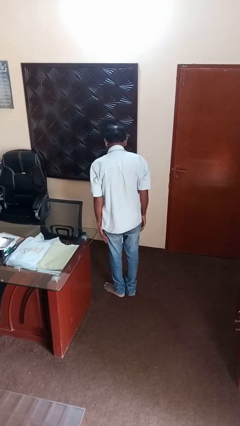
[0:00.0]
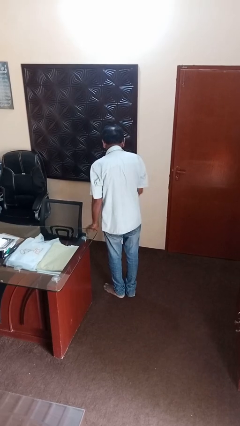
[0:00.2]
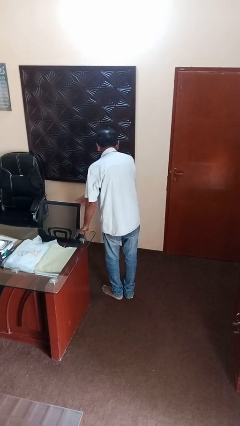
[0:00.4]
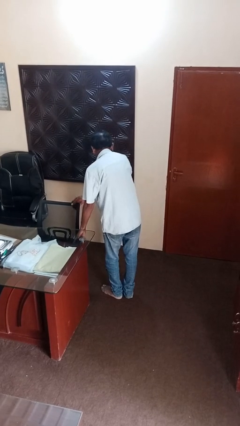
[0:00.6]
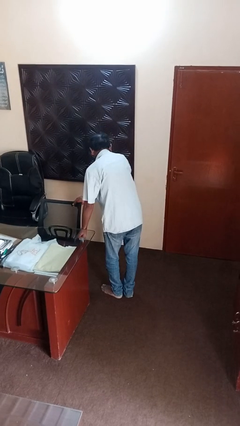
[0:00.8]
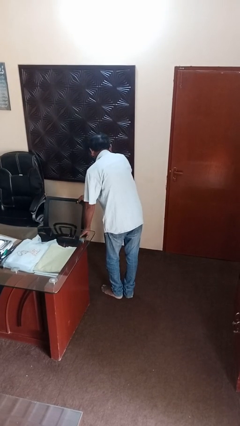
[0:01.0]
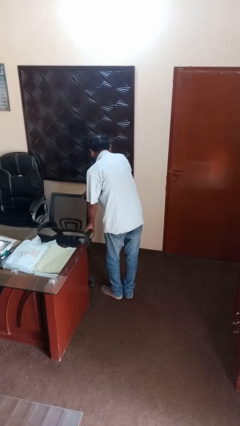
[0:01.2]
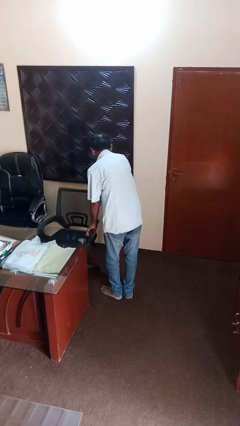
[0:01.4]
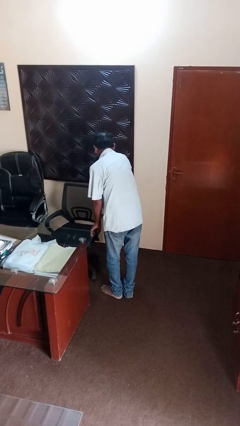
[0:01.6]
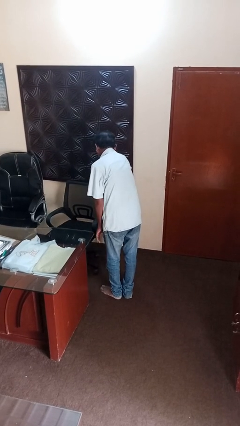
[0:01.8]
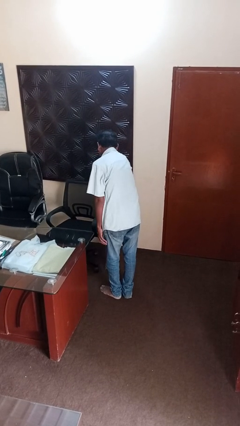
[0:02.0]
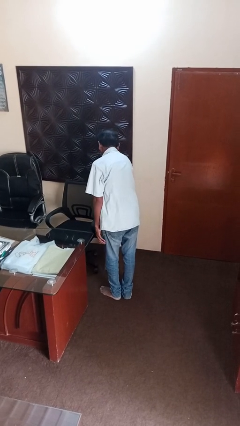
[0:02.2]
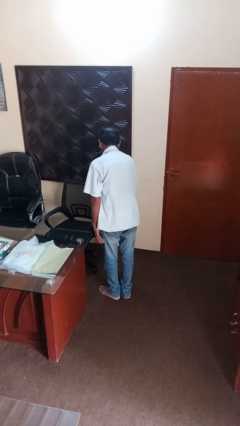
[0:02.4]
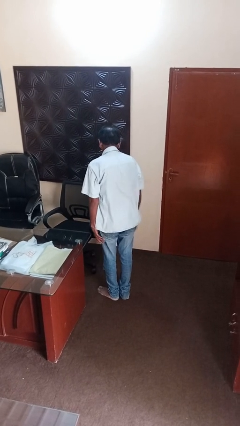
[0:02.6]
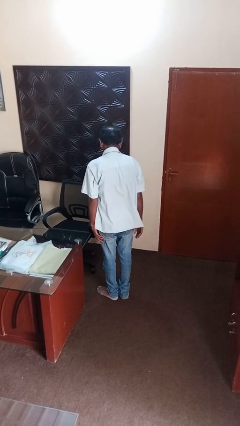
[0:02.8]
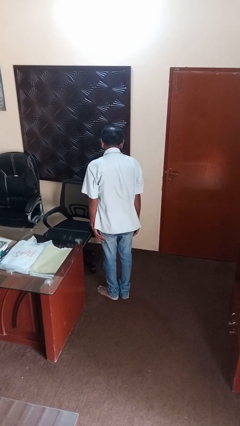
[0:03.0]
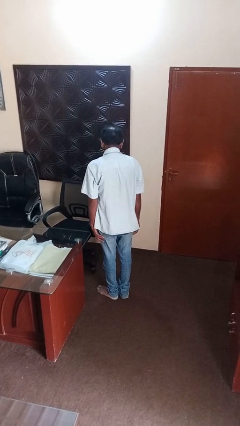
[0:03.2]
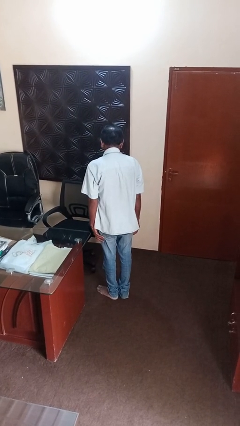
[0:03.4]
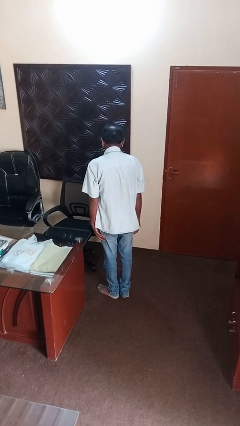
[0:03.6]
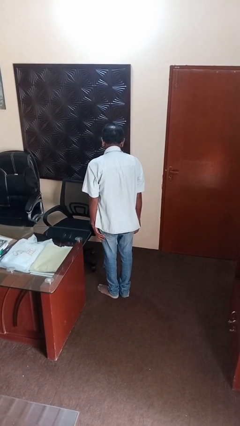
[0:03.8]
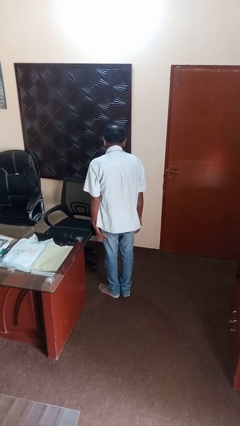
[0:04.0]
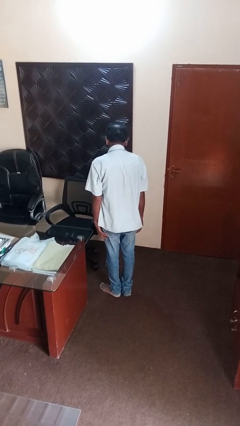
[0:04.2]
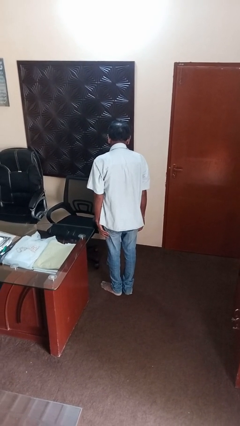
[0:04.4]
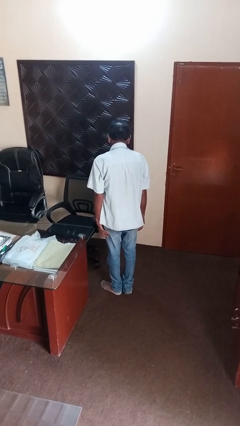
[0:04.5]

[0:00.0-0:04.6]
person pulls out chair

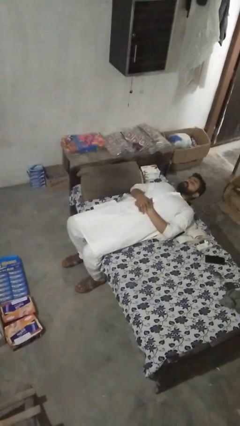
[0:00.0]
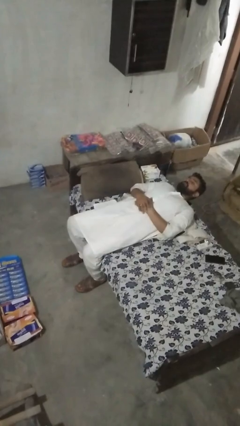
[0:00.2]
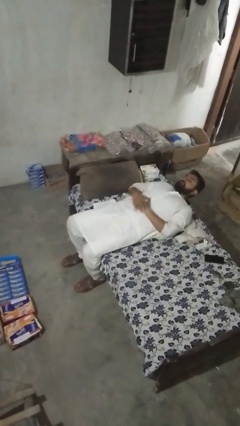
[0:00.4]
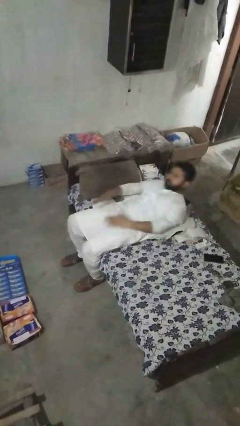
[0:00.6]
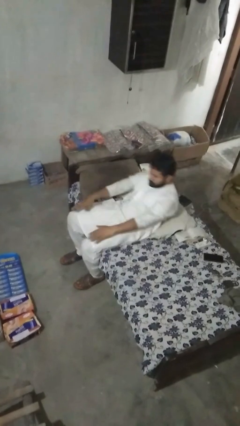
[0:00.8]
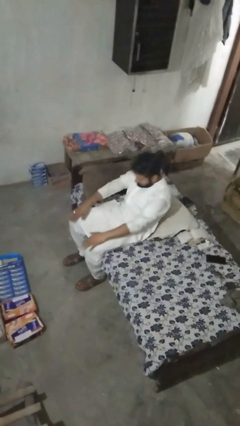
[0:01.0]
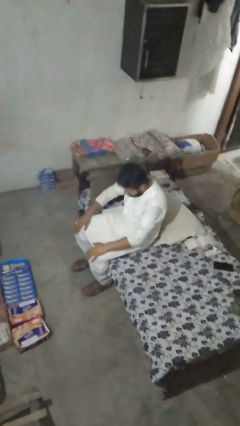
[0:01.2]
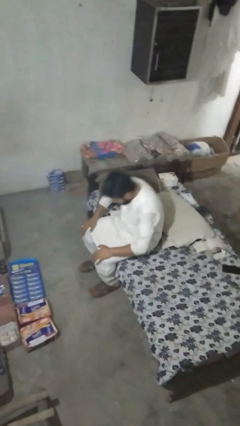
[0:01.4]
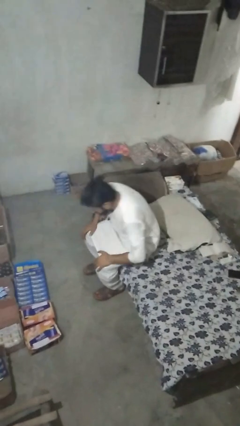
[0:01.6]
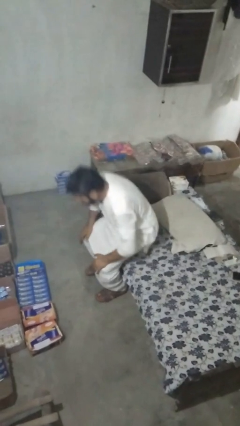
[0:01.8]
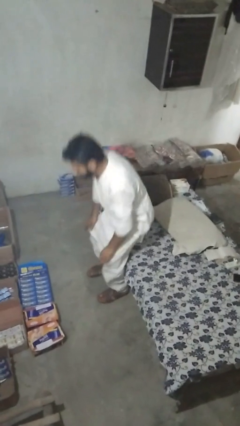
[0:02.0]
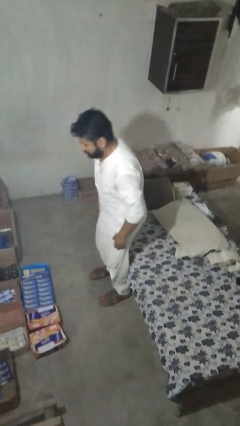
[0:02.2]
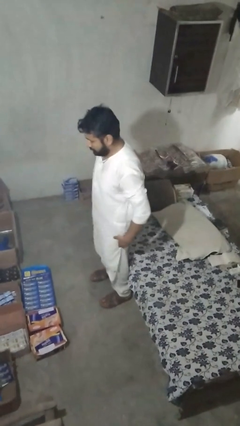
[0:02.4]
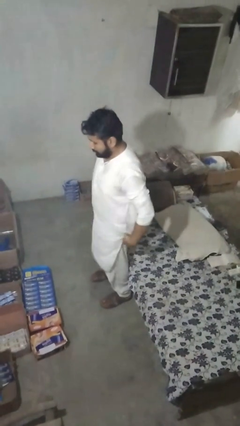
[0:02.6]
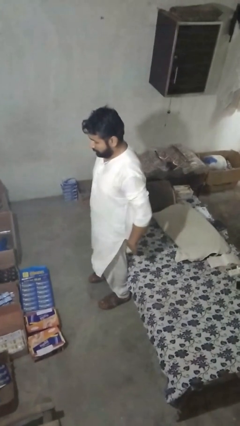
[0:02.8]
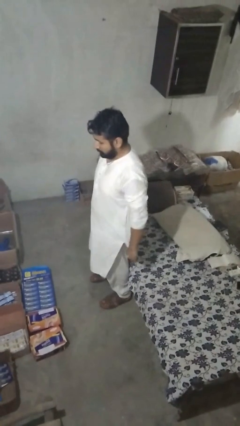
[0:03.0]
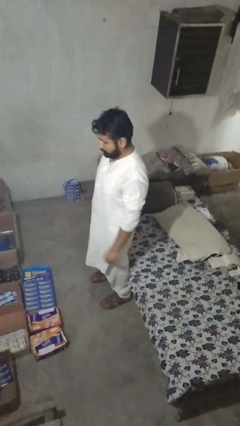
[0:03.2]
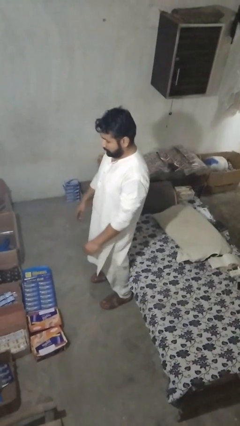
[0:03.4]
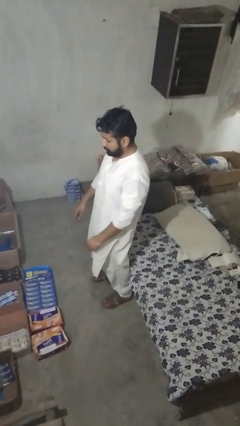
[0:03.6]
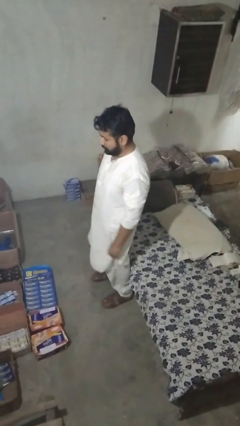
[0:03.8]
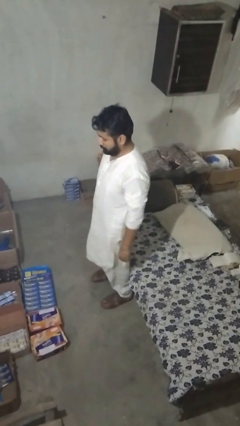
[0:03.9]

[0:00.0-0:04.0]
person stands up

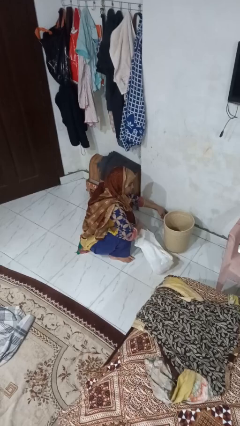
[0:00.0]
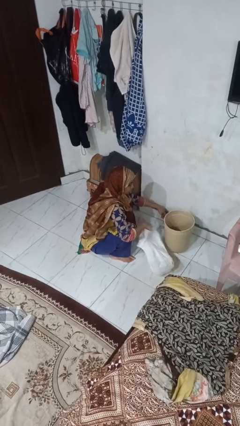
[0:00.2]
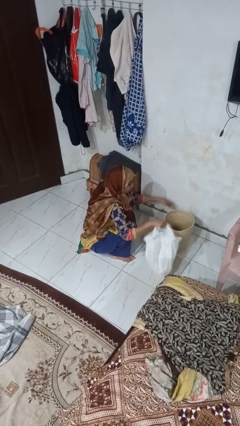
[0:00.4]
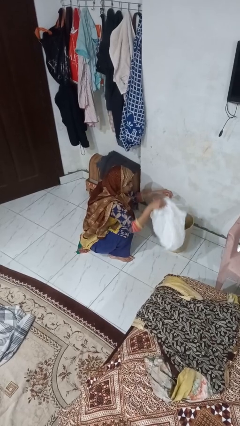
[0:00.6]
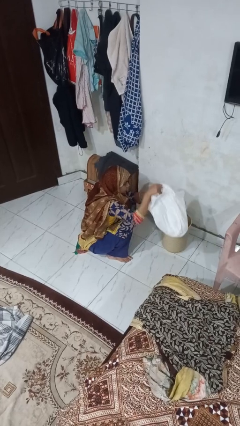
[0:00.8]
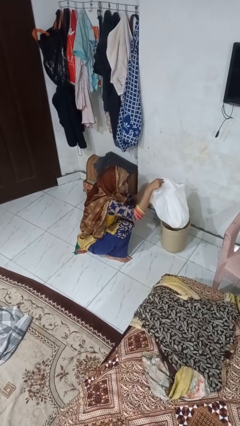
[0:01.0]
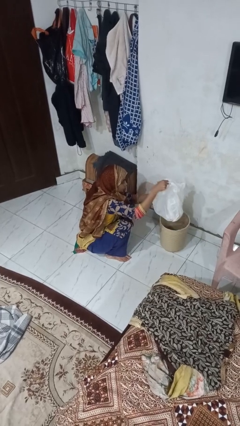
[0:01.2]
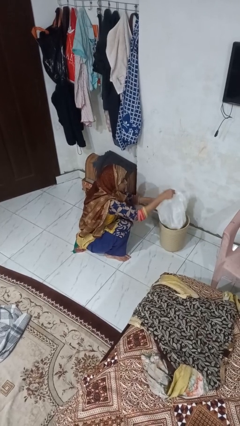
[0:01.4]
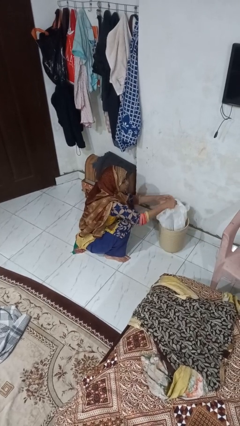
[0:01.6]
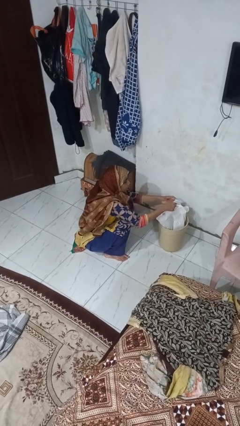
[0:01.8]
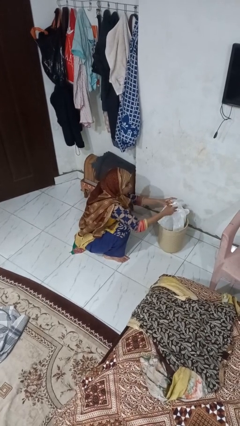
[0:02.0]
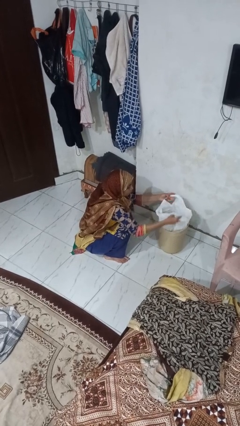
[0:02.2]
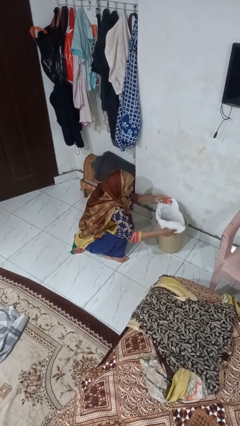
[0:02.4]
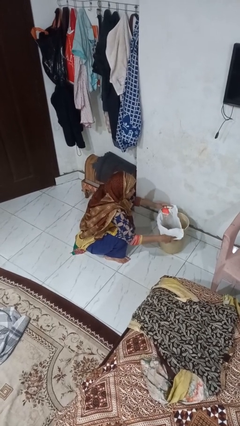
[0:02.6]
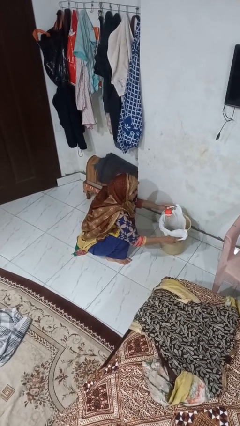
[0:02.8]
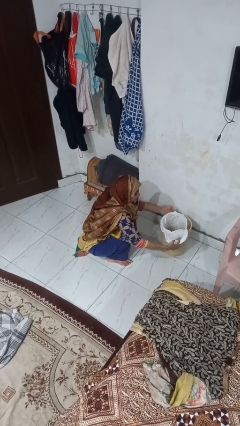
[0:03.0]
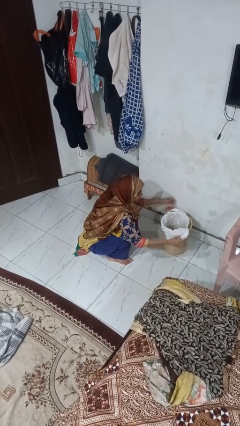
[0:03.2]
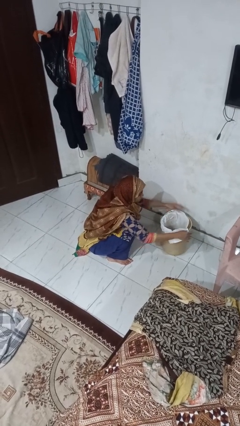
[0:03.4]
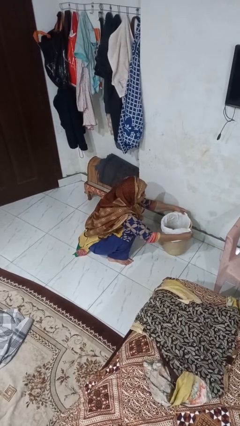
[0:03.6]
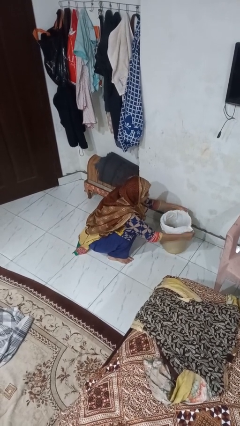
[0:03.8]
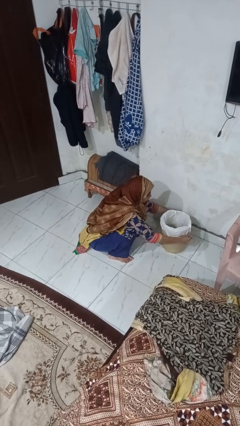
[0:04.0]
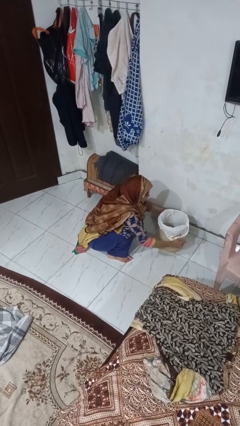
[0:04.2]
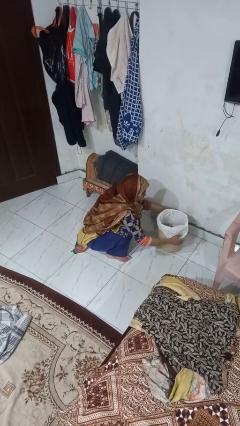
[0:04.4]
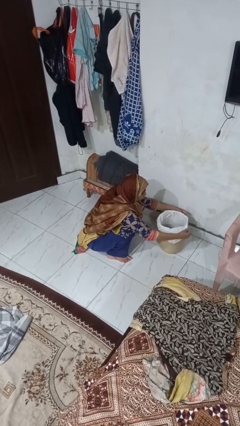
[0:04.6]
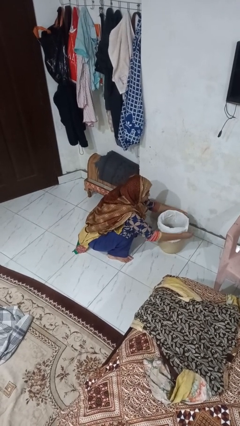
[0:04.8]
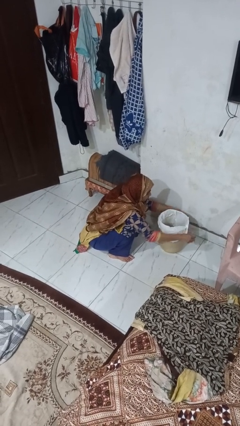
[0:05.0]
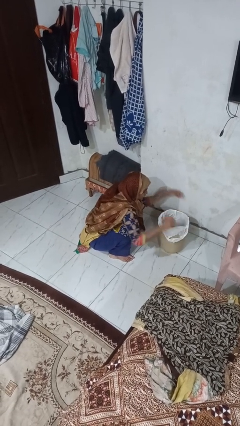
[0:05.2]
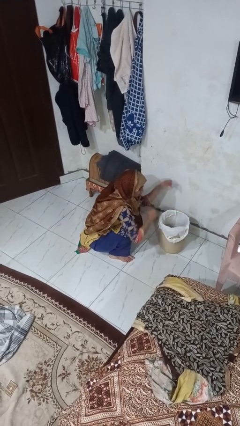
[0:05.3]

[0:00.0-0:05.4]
person inserts trashbag into trashcan

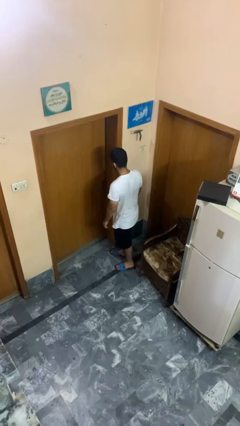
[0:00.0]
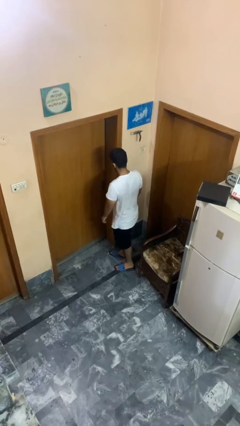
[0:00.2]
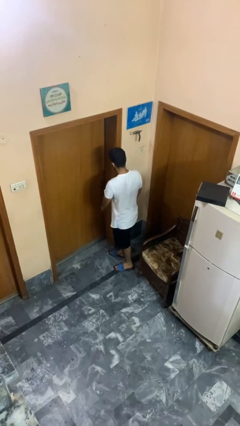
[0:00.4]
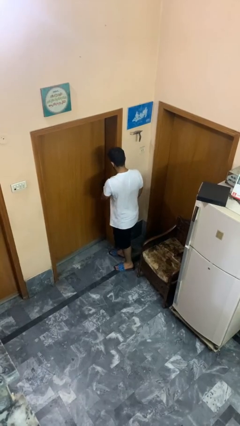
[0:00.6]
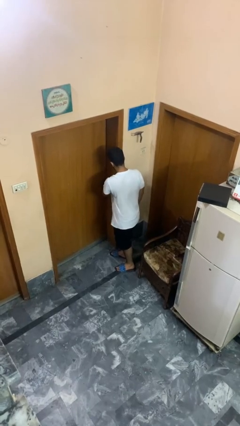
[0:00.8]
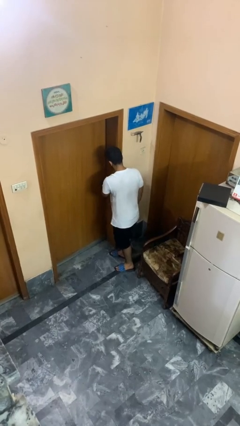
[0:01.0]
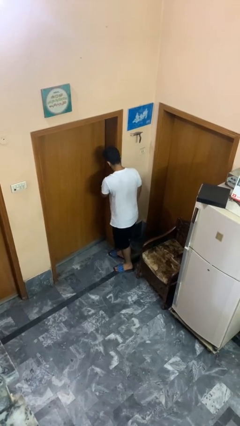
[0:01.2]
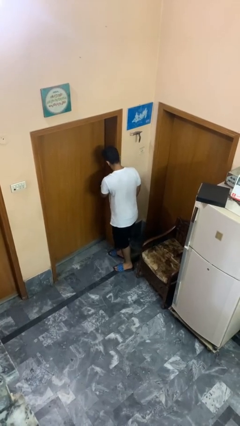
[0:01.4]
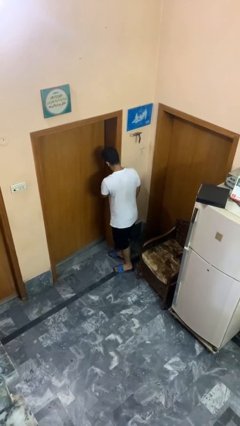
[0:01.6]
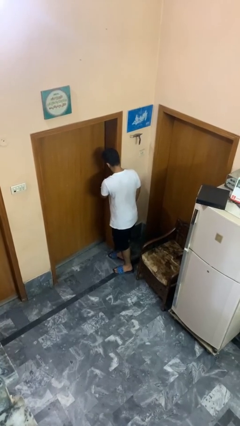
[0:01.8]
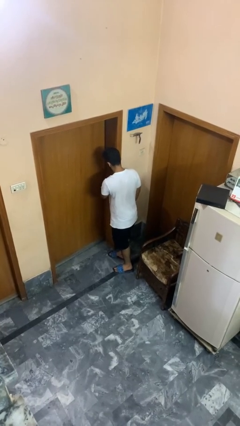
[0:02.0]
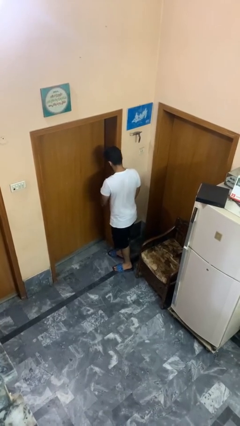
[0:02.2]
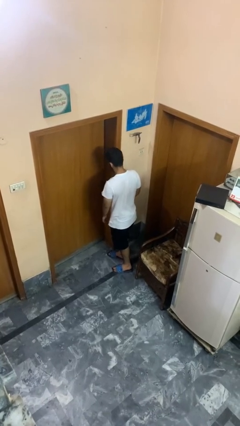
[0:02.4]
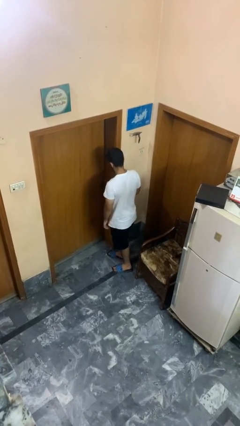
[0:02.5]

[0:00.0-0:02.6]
person unlocks door with keys

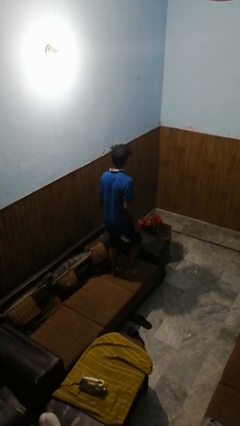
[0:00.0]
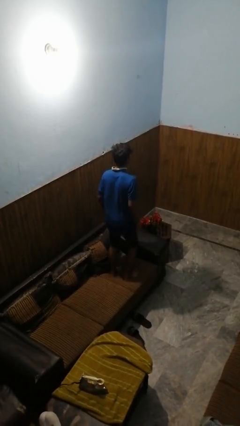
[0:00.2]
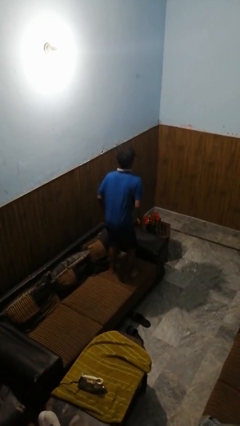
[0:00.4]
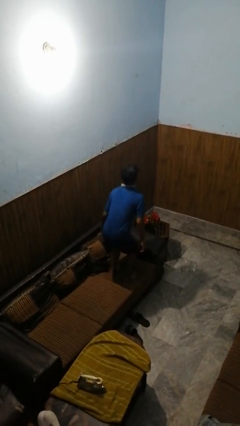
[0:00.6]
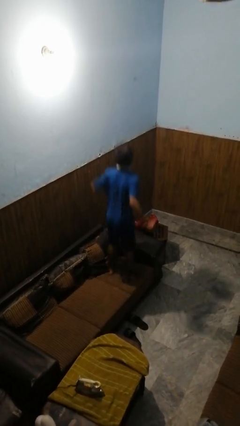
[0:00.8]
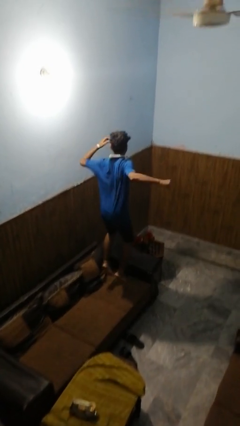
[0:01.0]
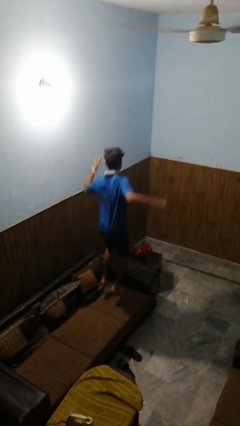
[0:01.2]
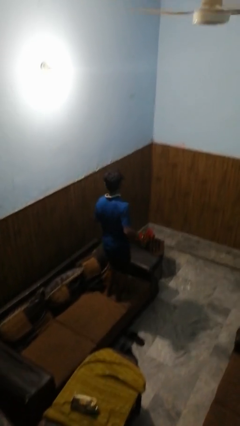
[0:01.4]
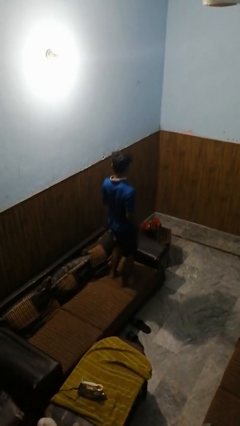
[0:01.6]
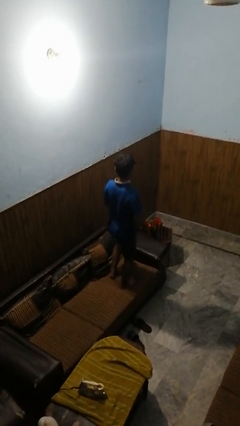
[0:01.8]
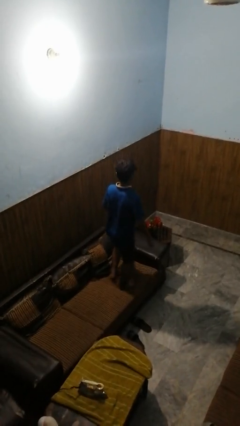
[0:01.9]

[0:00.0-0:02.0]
person jumps on couch
